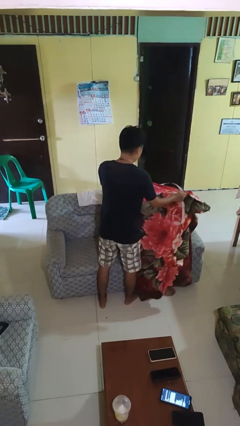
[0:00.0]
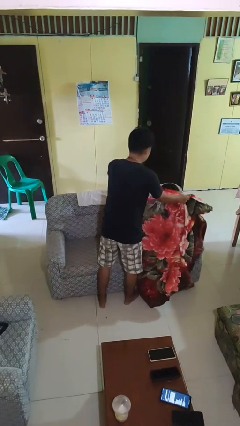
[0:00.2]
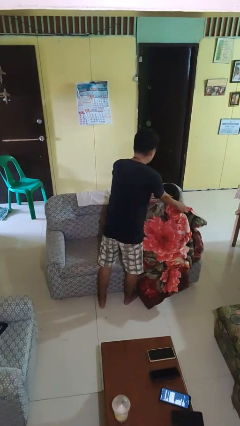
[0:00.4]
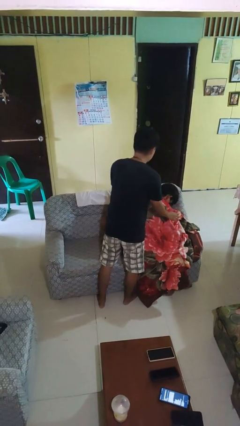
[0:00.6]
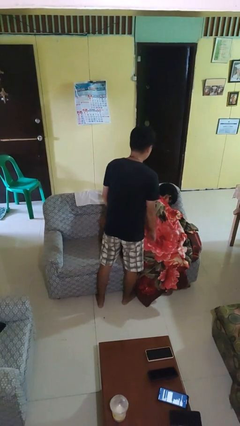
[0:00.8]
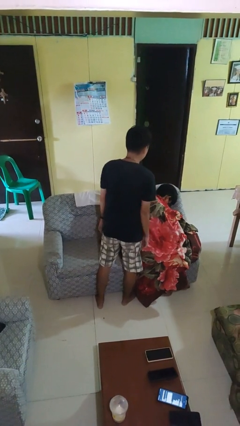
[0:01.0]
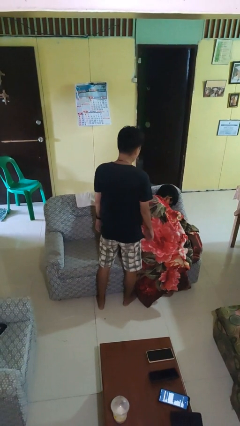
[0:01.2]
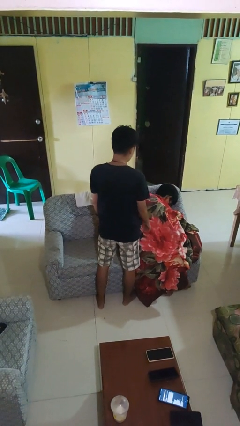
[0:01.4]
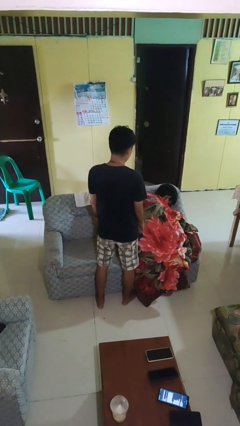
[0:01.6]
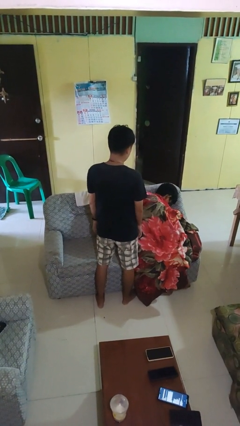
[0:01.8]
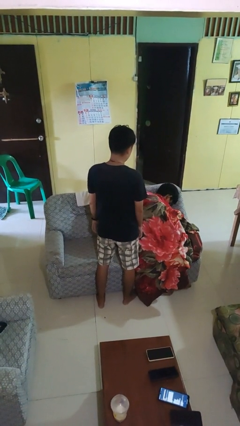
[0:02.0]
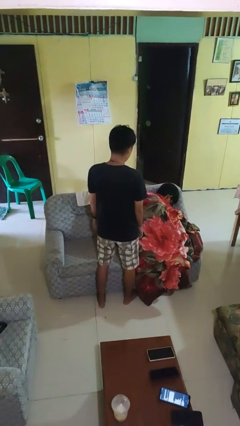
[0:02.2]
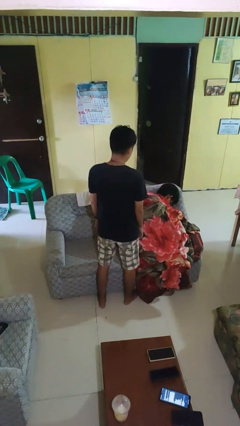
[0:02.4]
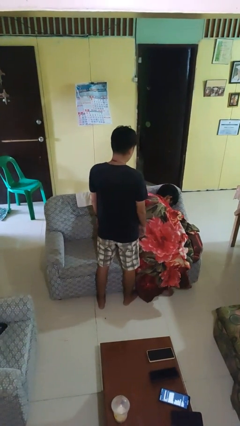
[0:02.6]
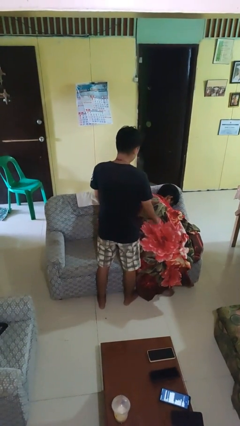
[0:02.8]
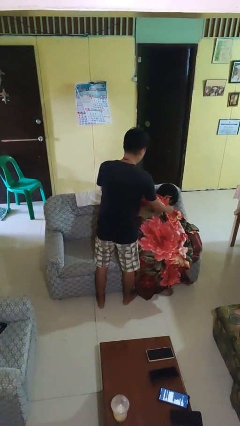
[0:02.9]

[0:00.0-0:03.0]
person covers friend with blanket

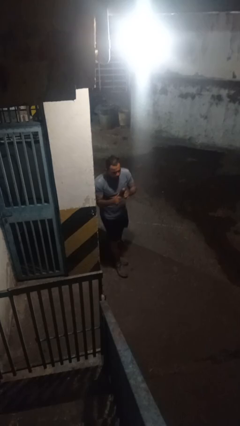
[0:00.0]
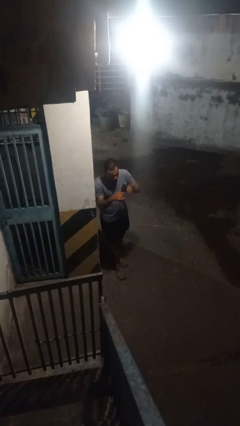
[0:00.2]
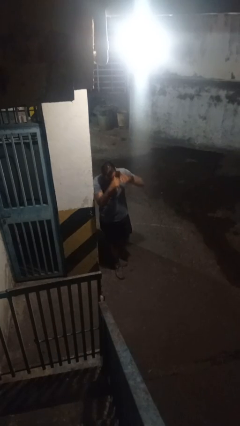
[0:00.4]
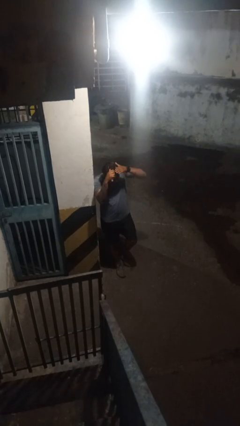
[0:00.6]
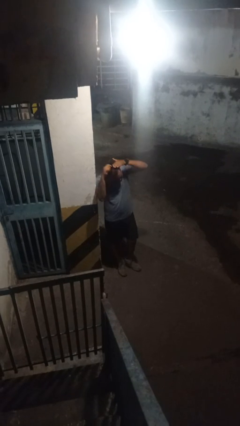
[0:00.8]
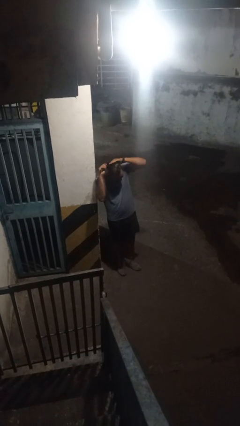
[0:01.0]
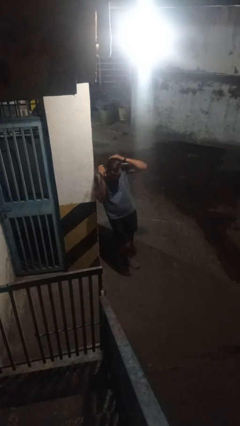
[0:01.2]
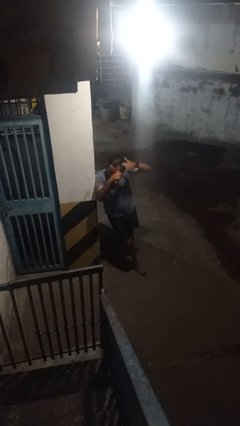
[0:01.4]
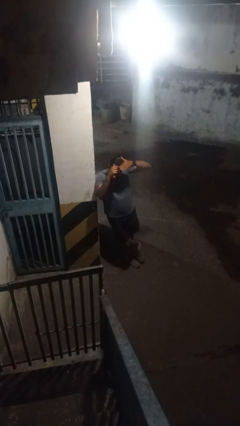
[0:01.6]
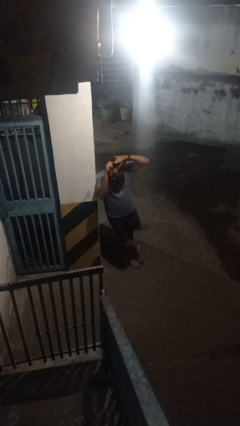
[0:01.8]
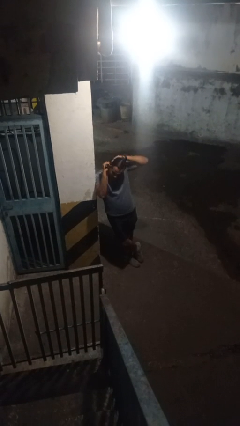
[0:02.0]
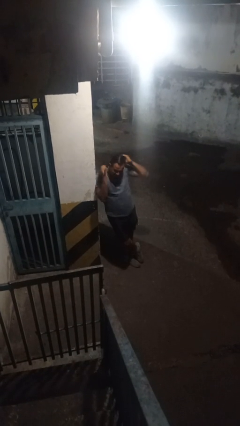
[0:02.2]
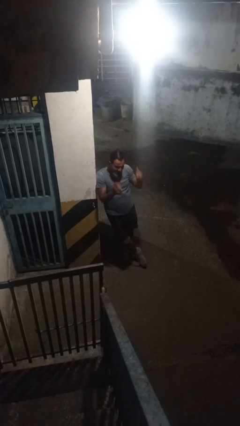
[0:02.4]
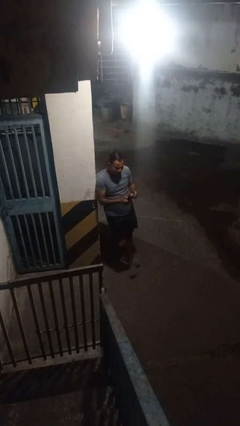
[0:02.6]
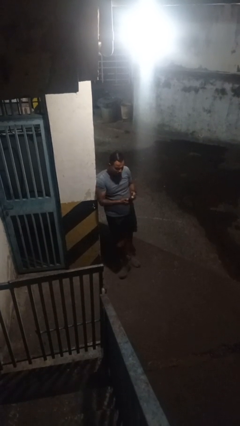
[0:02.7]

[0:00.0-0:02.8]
person brushes hair

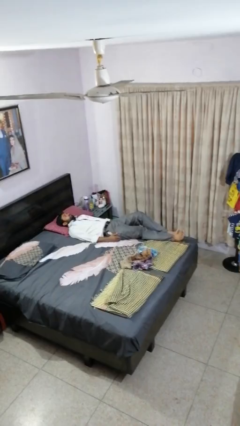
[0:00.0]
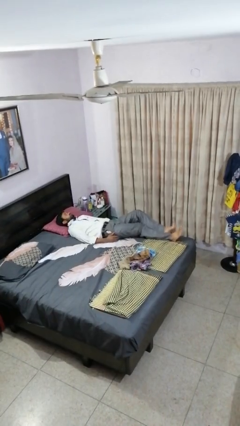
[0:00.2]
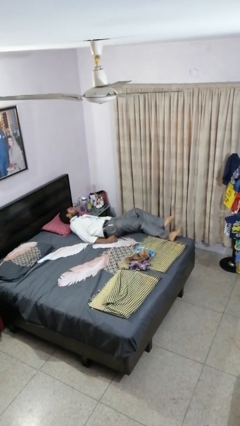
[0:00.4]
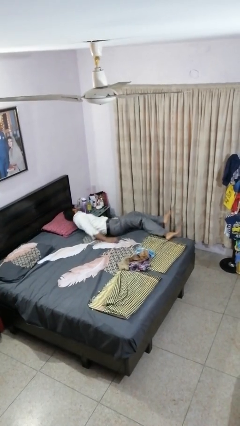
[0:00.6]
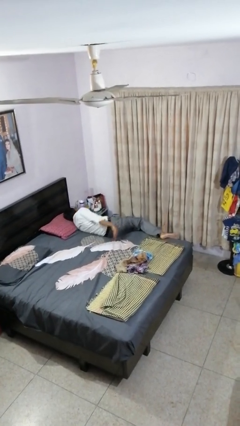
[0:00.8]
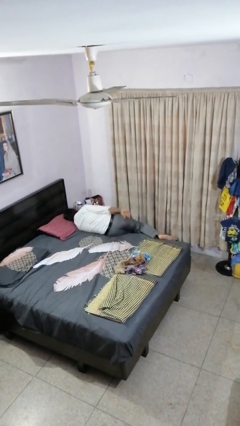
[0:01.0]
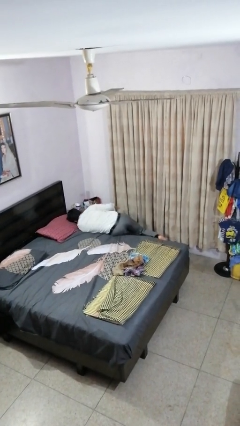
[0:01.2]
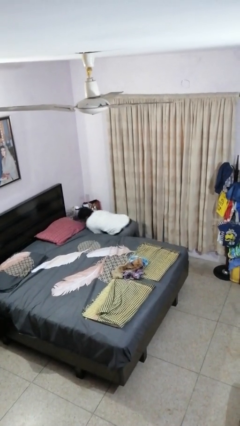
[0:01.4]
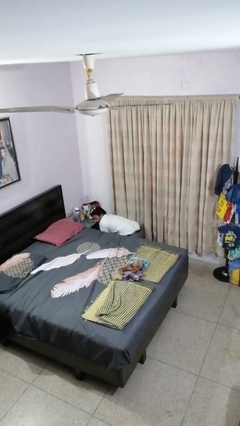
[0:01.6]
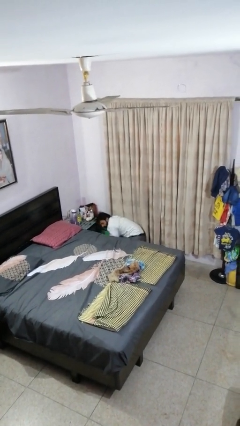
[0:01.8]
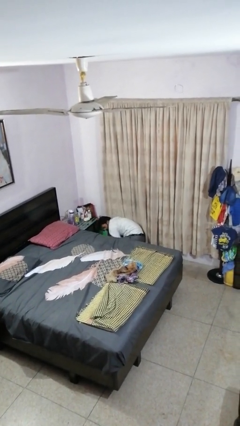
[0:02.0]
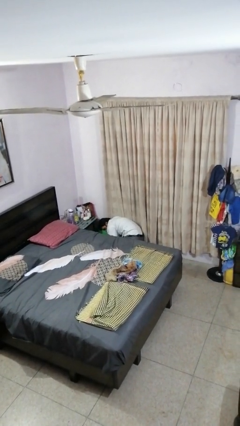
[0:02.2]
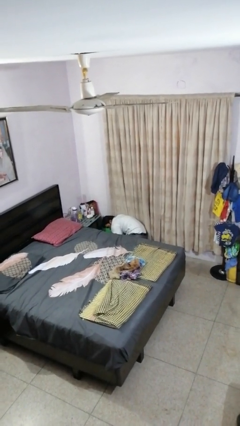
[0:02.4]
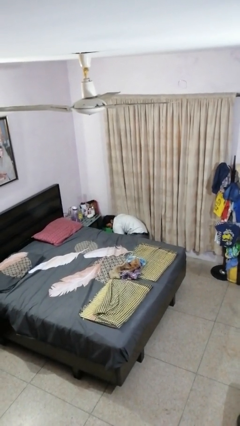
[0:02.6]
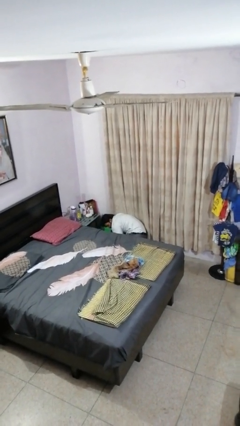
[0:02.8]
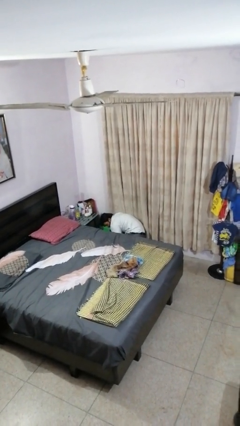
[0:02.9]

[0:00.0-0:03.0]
person falls from bed

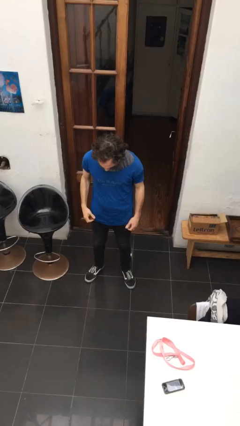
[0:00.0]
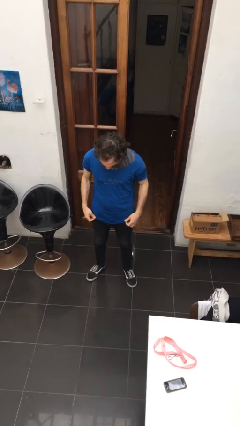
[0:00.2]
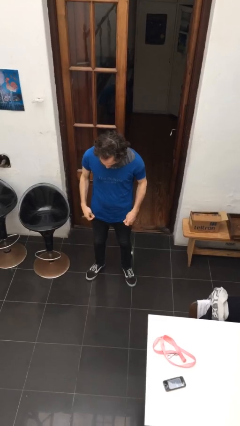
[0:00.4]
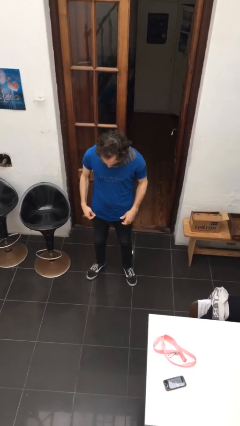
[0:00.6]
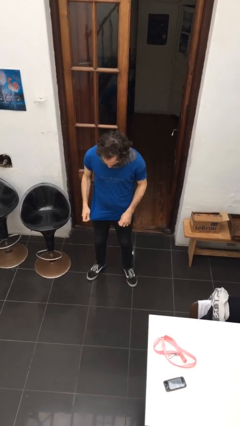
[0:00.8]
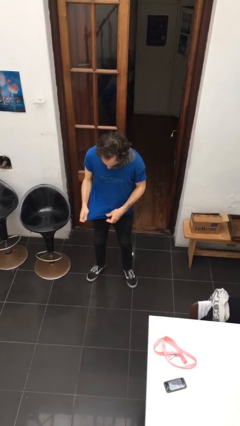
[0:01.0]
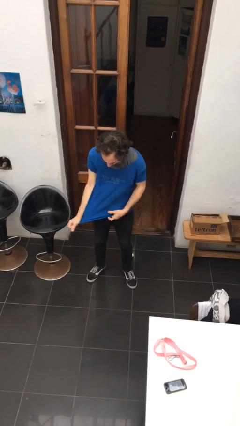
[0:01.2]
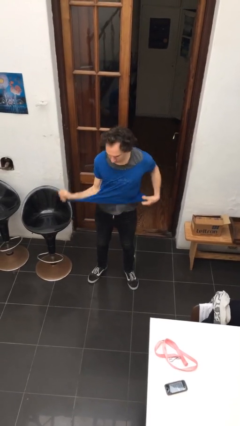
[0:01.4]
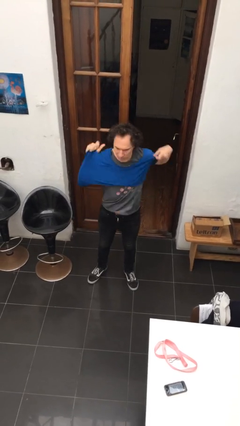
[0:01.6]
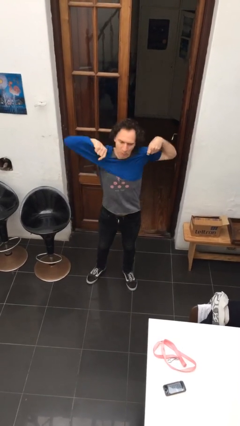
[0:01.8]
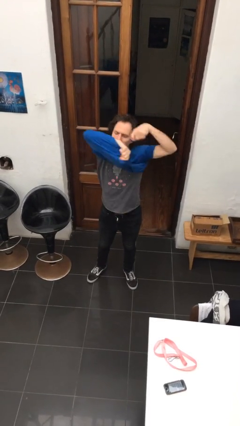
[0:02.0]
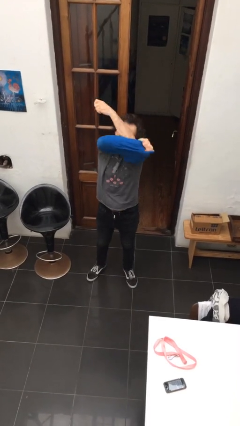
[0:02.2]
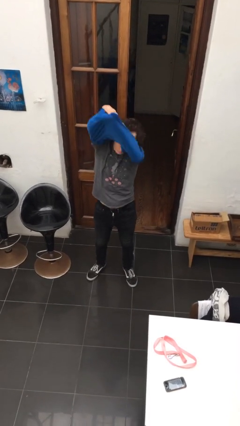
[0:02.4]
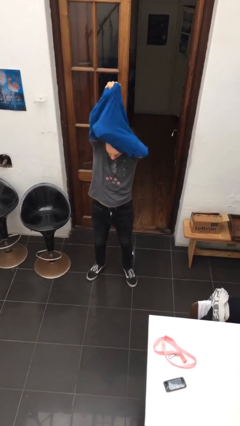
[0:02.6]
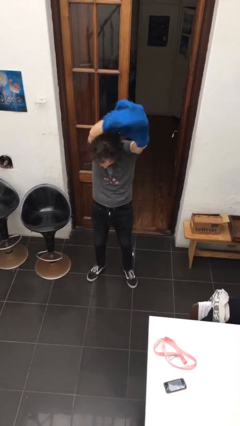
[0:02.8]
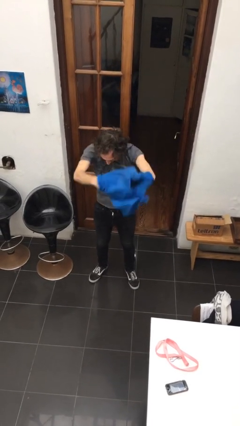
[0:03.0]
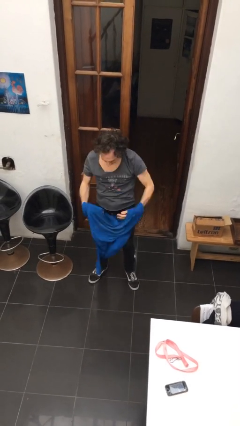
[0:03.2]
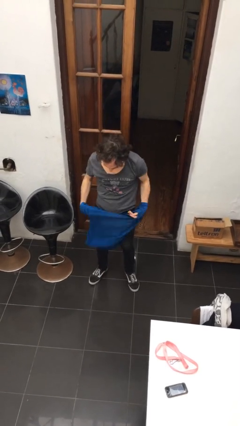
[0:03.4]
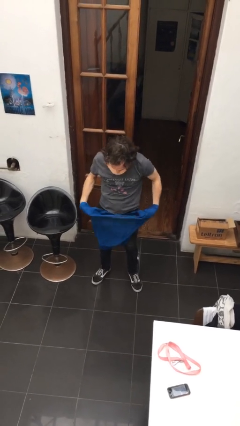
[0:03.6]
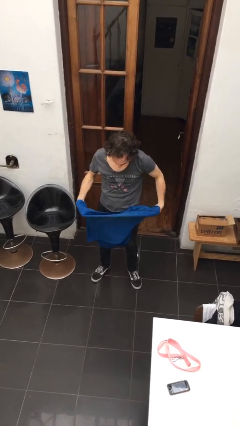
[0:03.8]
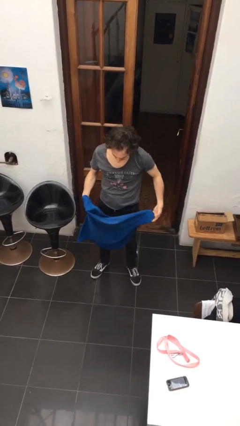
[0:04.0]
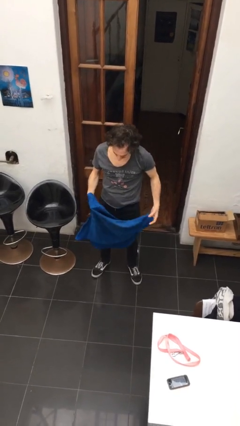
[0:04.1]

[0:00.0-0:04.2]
person takes off shirt

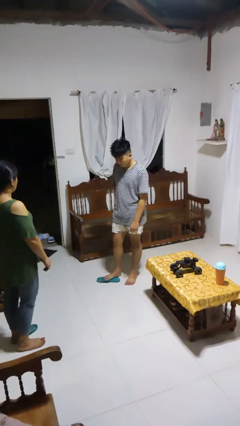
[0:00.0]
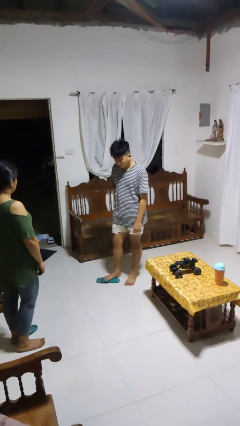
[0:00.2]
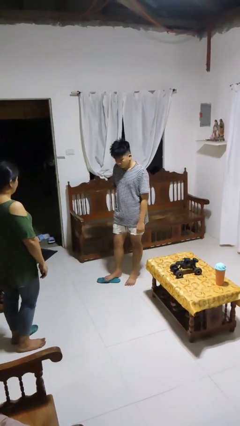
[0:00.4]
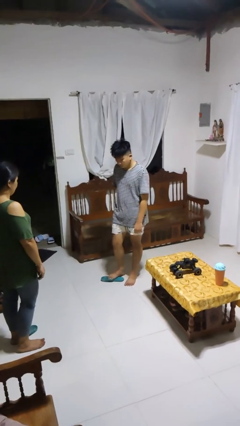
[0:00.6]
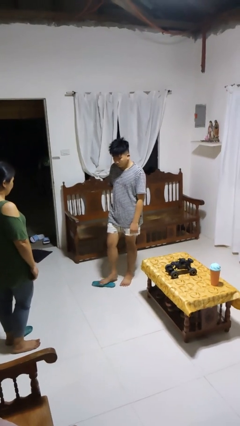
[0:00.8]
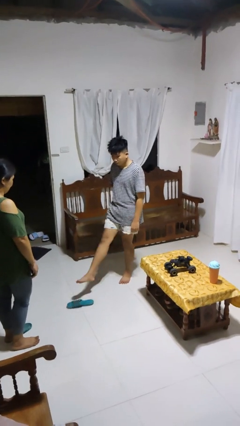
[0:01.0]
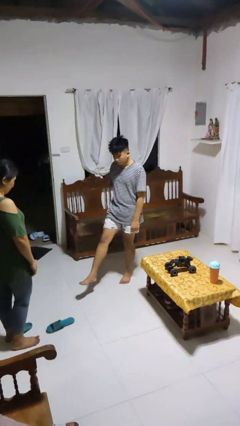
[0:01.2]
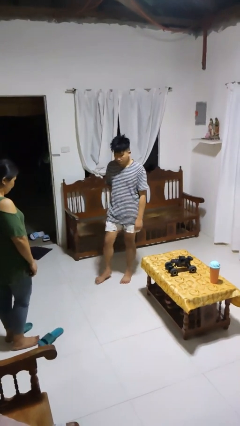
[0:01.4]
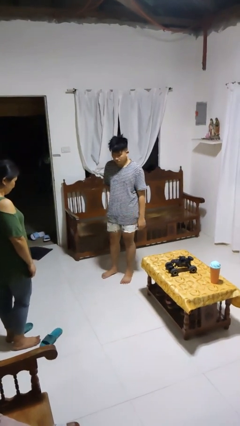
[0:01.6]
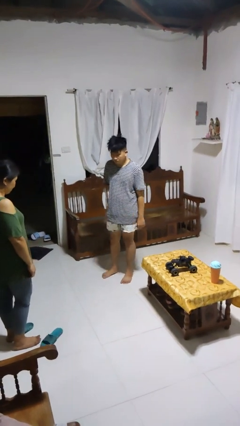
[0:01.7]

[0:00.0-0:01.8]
person kicks object to person

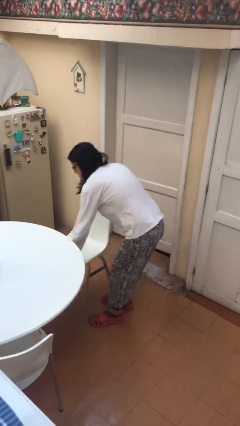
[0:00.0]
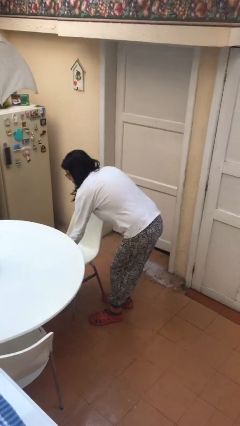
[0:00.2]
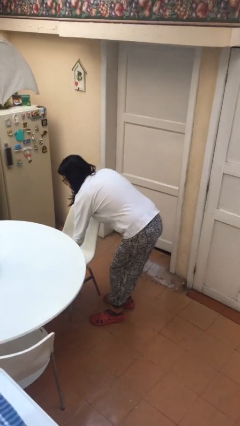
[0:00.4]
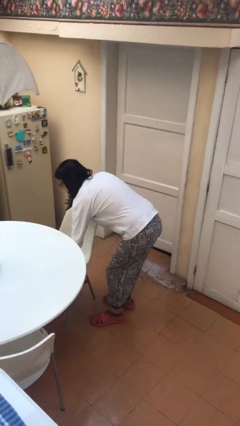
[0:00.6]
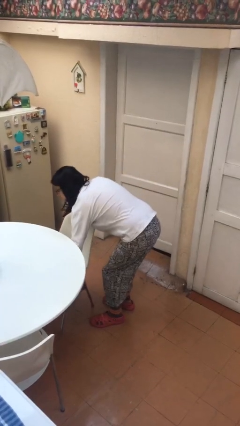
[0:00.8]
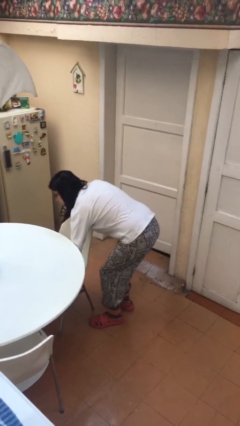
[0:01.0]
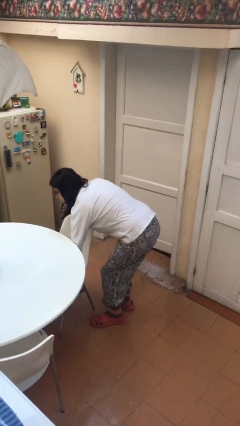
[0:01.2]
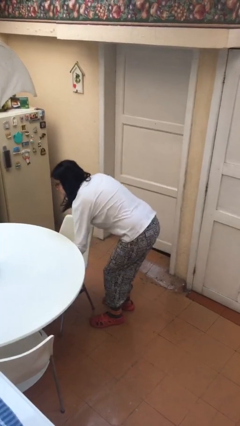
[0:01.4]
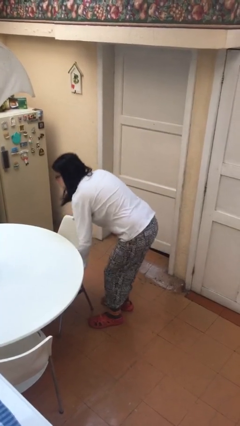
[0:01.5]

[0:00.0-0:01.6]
person puts down object on floor

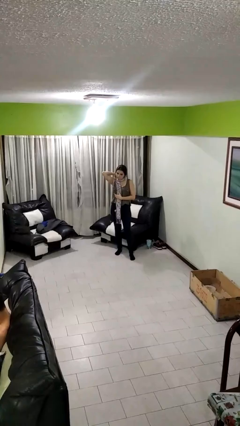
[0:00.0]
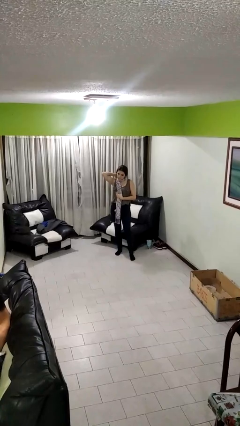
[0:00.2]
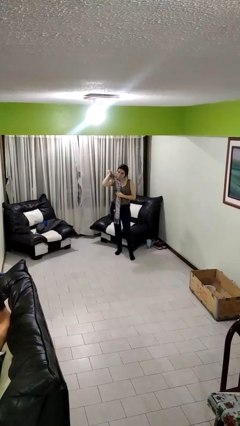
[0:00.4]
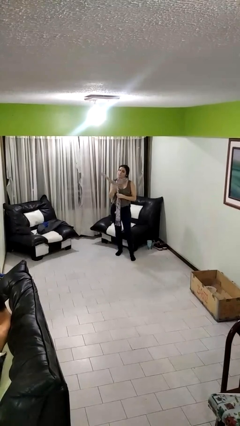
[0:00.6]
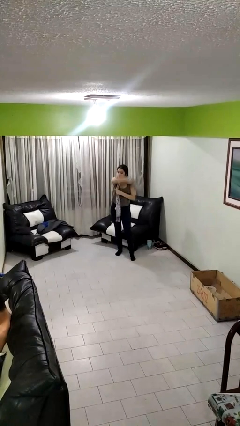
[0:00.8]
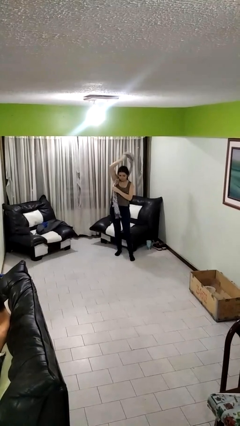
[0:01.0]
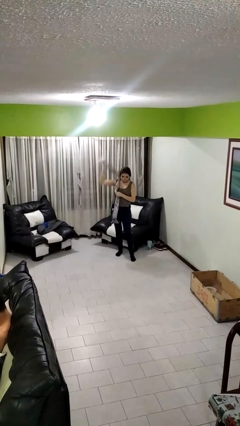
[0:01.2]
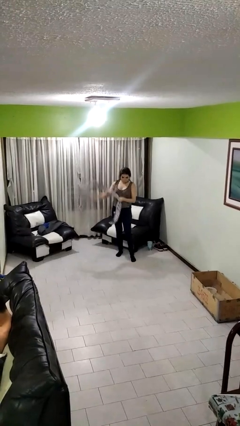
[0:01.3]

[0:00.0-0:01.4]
person takes off scarf
